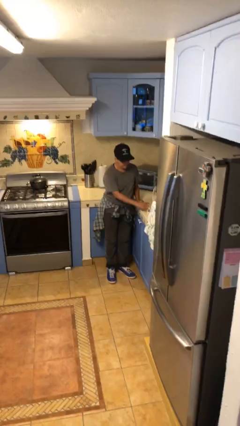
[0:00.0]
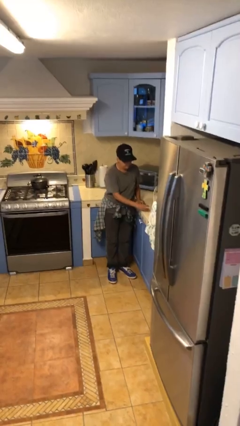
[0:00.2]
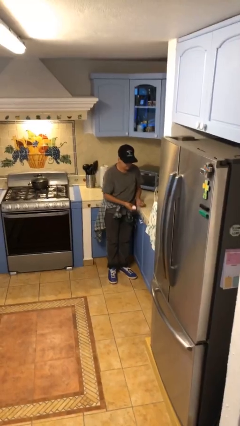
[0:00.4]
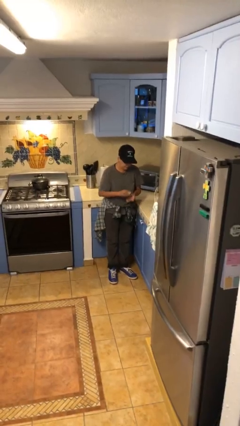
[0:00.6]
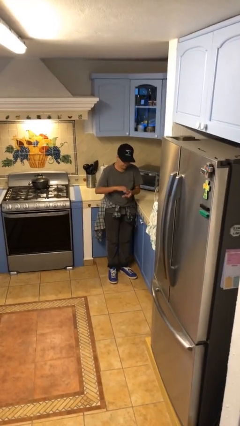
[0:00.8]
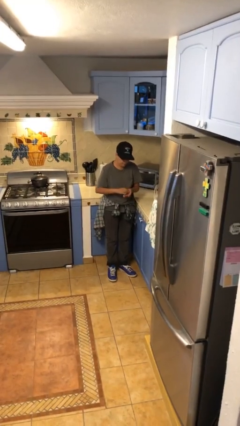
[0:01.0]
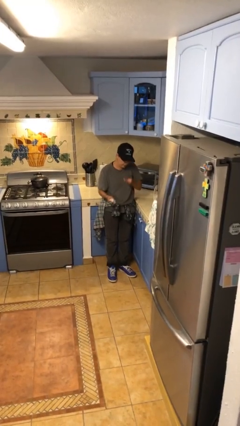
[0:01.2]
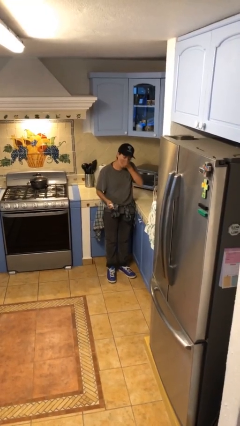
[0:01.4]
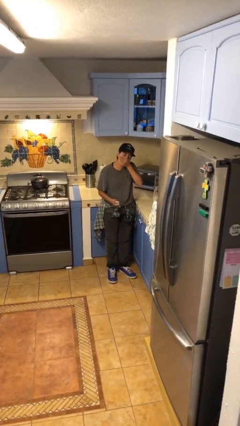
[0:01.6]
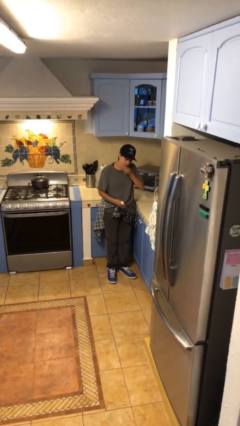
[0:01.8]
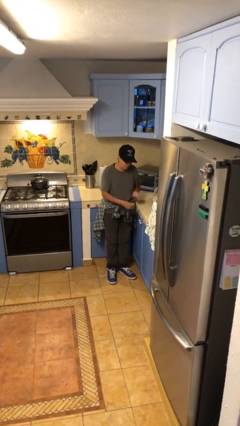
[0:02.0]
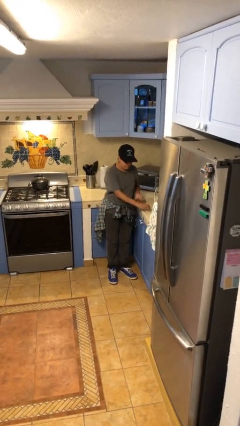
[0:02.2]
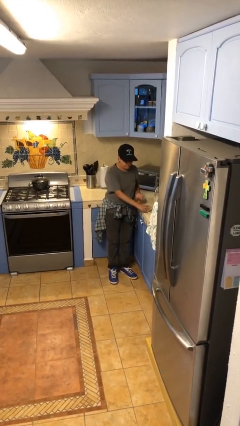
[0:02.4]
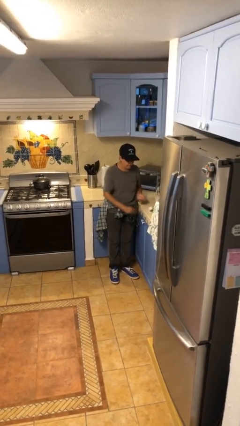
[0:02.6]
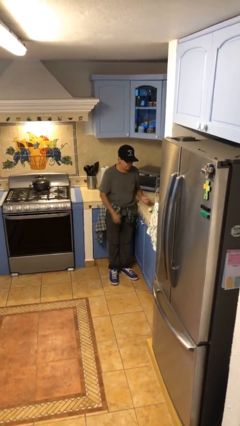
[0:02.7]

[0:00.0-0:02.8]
person takes medicine pills

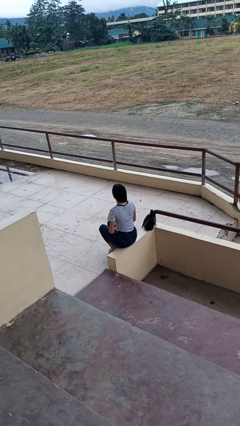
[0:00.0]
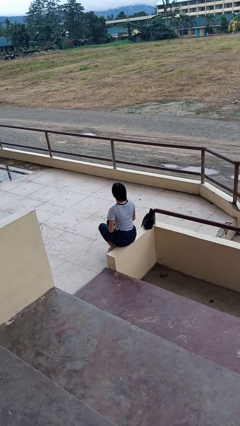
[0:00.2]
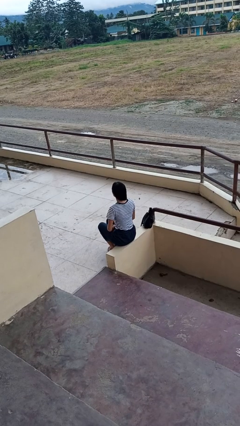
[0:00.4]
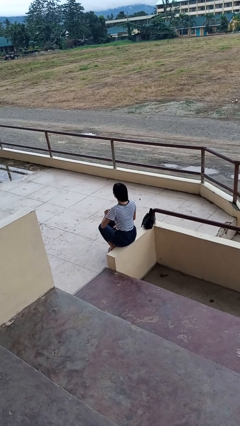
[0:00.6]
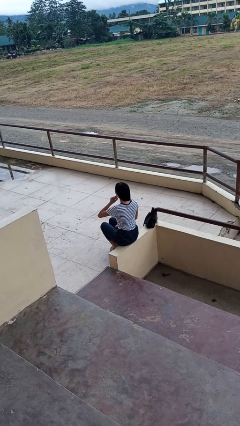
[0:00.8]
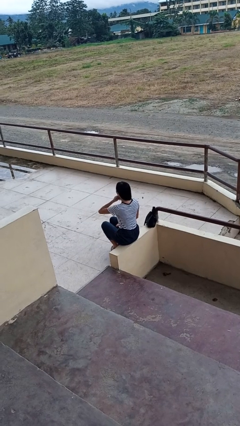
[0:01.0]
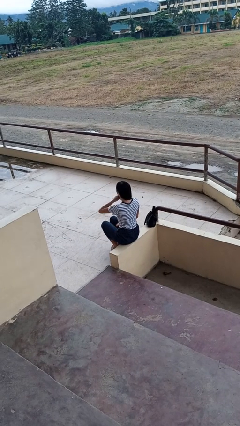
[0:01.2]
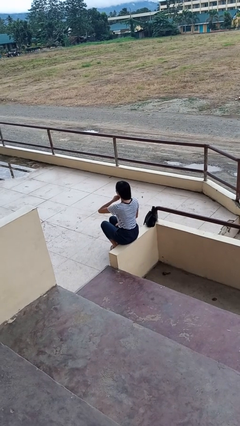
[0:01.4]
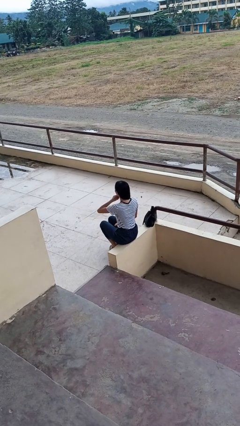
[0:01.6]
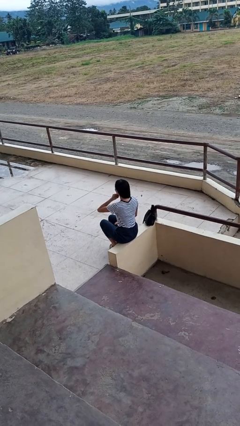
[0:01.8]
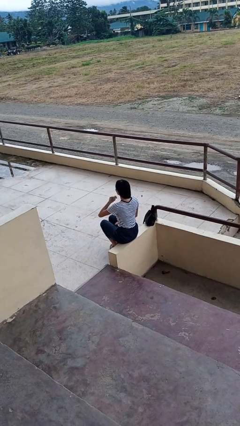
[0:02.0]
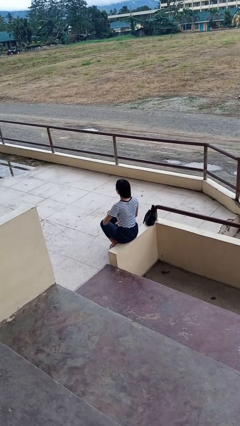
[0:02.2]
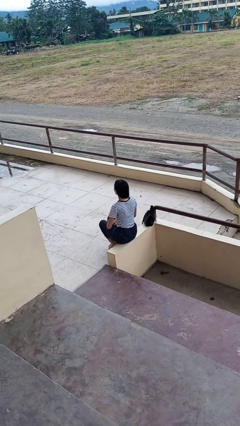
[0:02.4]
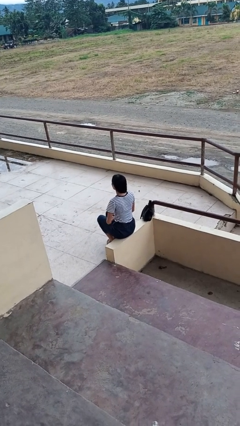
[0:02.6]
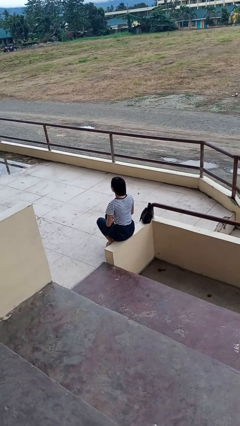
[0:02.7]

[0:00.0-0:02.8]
person strokes chin

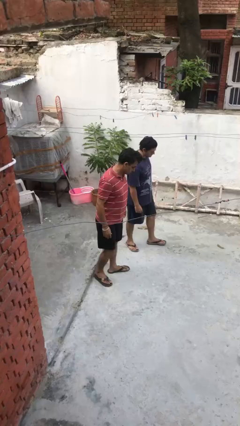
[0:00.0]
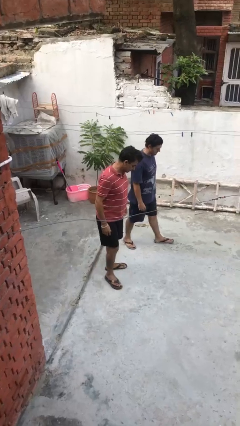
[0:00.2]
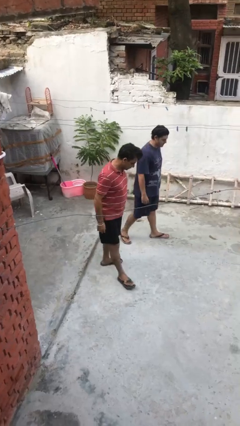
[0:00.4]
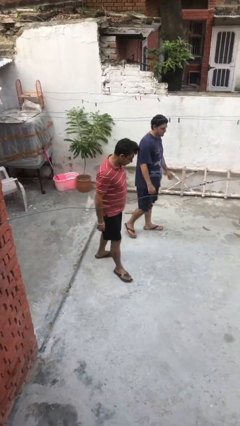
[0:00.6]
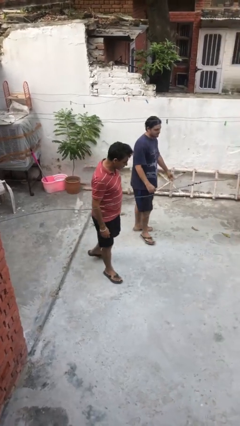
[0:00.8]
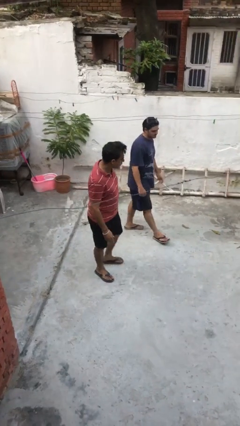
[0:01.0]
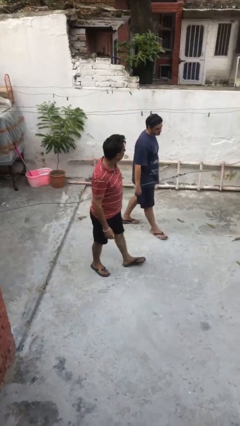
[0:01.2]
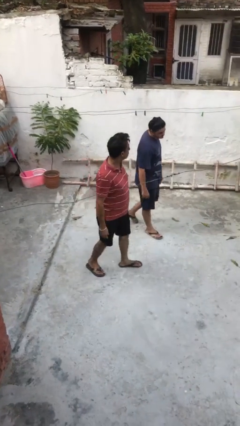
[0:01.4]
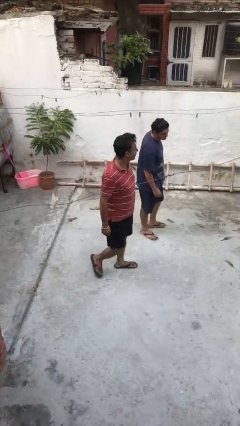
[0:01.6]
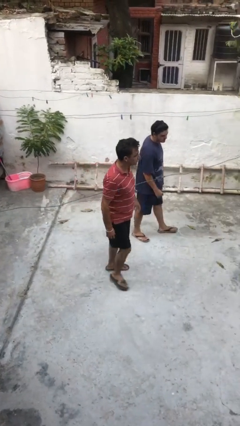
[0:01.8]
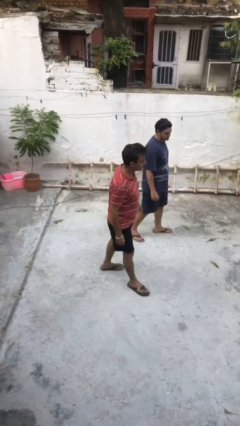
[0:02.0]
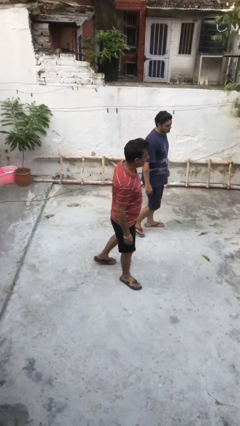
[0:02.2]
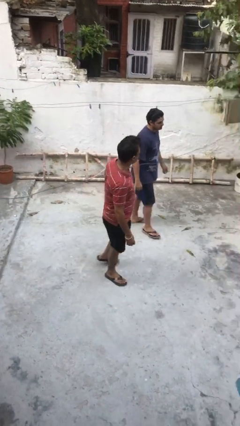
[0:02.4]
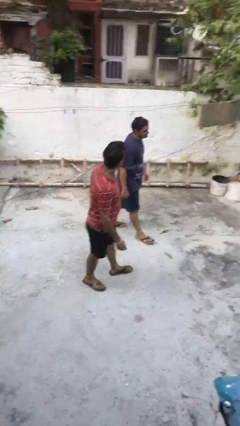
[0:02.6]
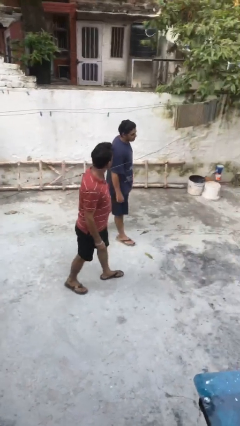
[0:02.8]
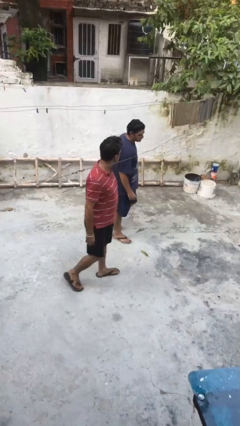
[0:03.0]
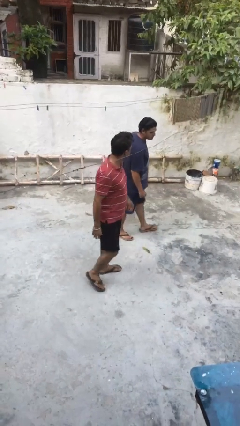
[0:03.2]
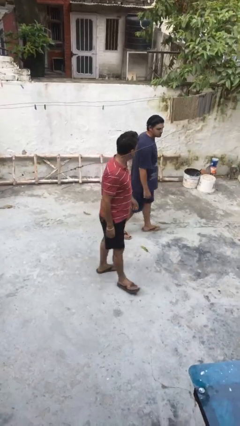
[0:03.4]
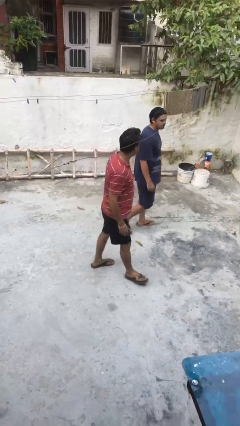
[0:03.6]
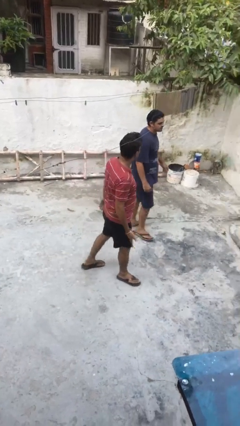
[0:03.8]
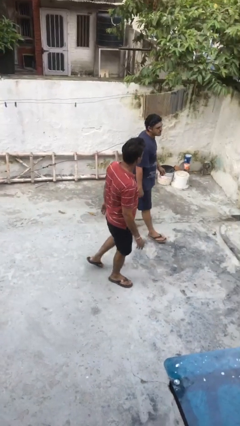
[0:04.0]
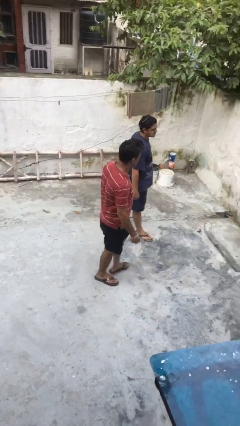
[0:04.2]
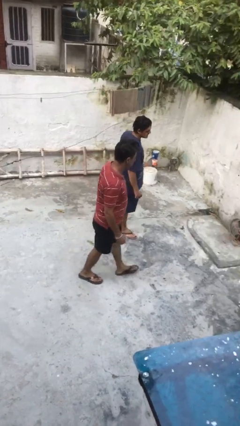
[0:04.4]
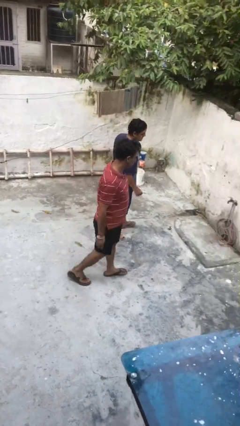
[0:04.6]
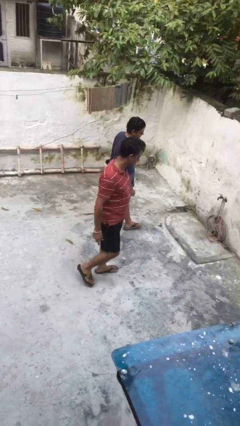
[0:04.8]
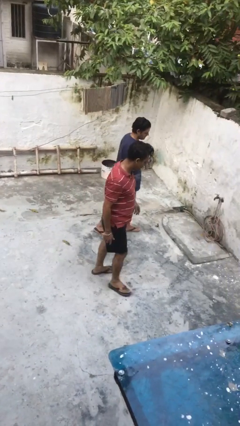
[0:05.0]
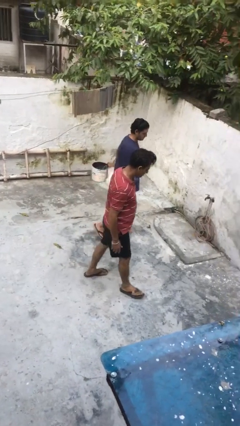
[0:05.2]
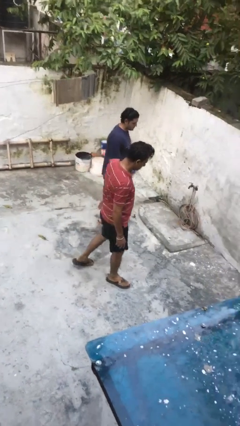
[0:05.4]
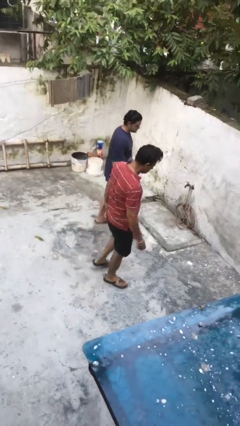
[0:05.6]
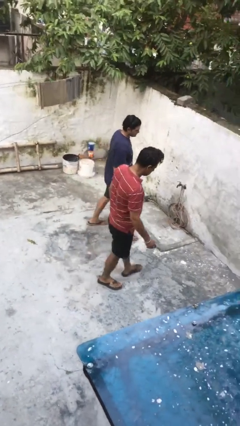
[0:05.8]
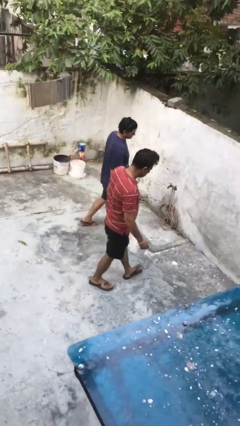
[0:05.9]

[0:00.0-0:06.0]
person talks to person

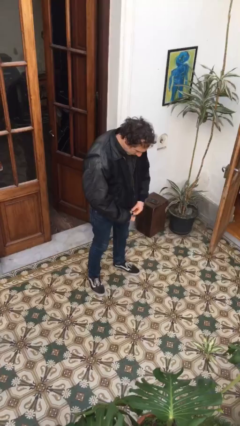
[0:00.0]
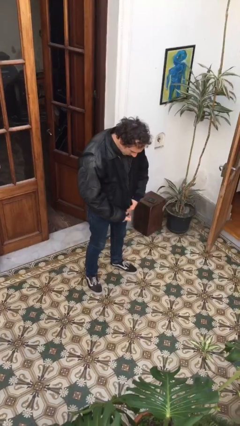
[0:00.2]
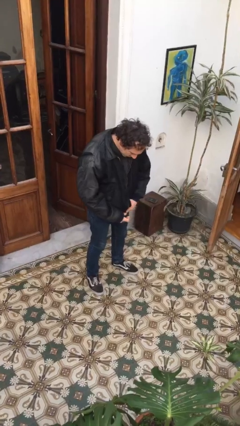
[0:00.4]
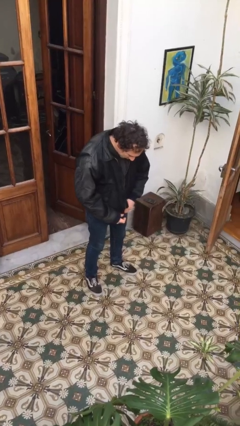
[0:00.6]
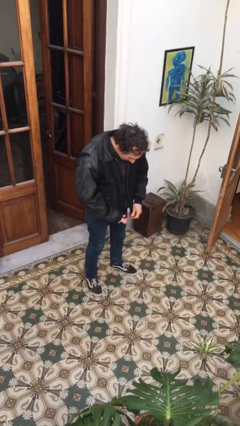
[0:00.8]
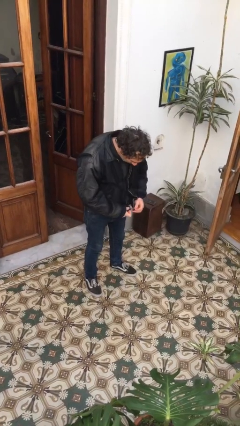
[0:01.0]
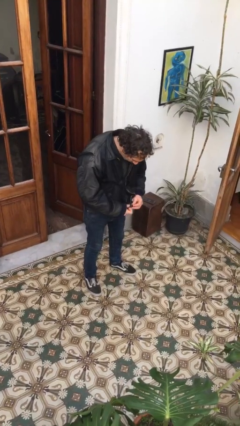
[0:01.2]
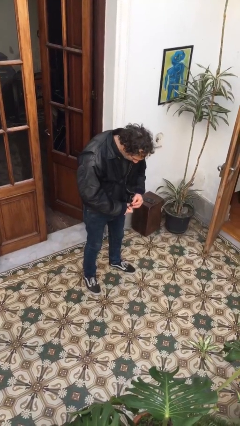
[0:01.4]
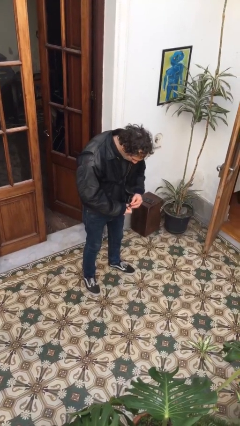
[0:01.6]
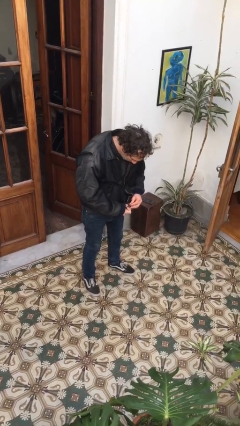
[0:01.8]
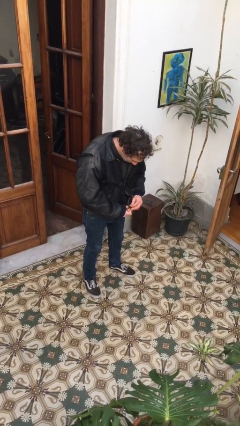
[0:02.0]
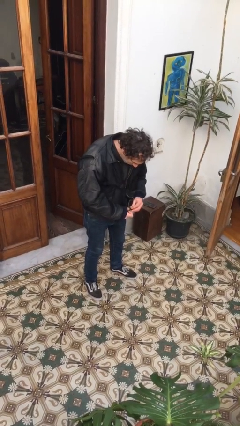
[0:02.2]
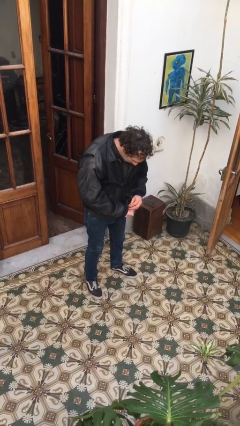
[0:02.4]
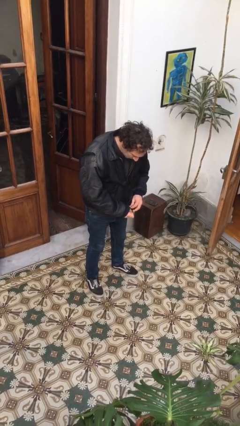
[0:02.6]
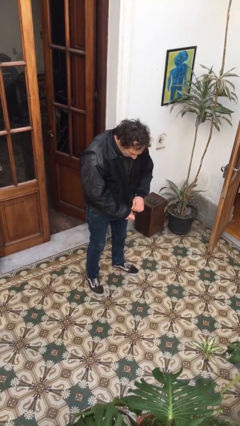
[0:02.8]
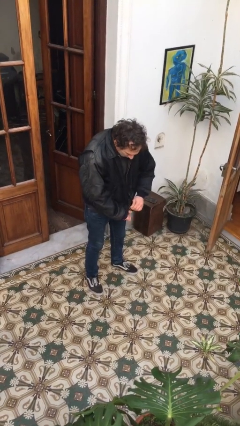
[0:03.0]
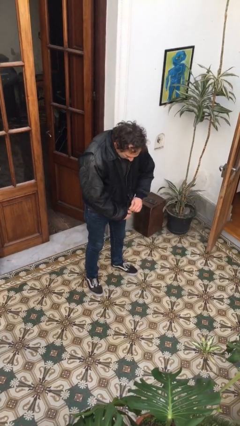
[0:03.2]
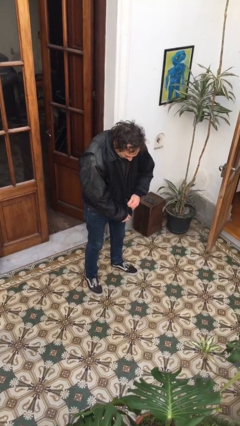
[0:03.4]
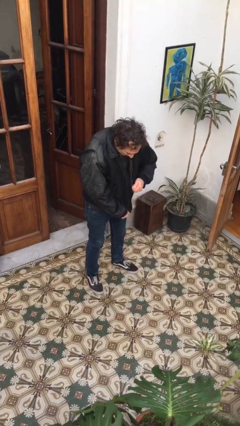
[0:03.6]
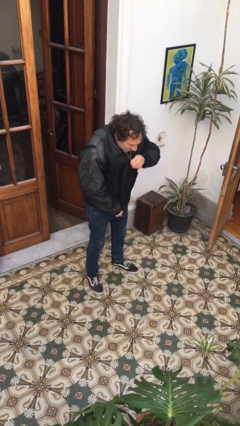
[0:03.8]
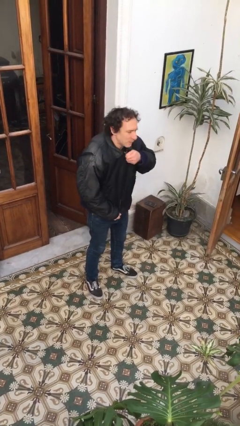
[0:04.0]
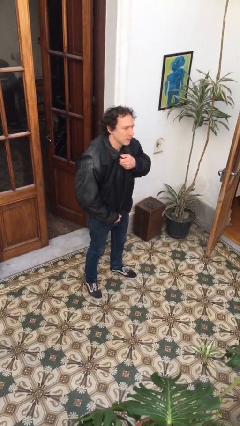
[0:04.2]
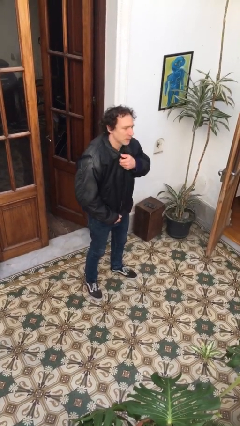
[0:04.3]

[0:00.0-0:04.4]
person zips up jacket

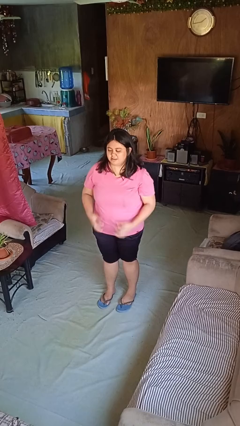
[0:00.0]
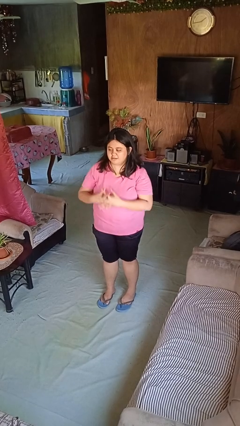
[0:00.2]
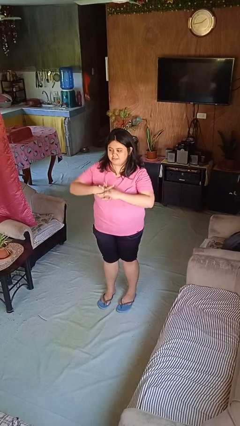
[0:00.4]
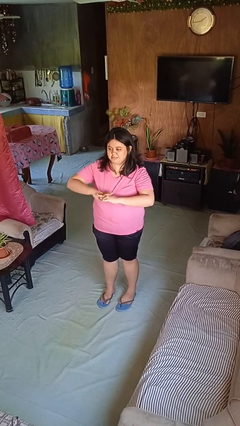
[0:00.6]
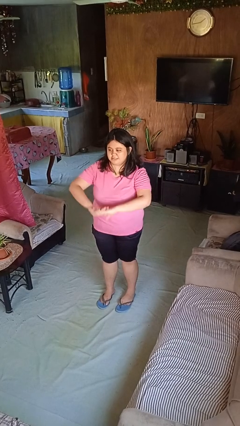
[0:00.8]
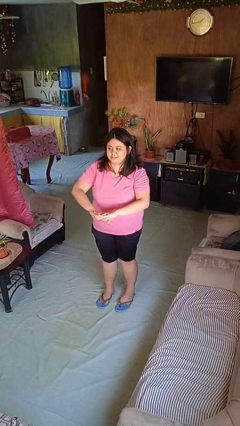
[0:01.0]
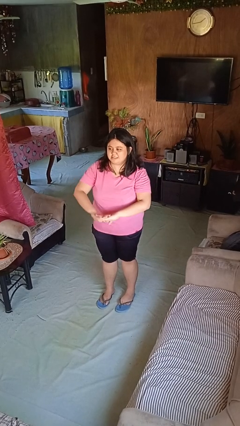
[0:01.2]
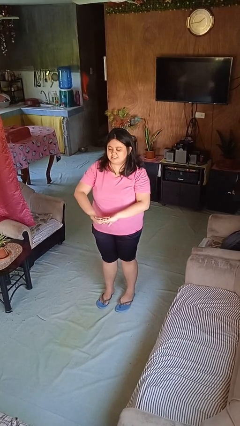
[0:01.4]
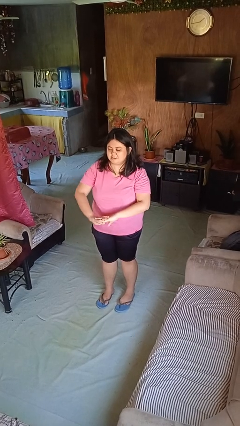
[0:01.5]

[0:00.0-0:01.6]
person cracks knuckles
